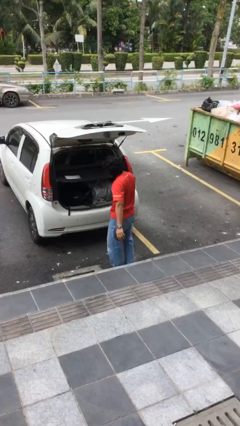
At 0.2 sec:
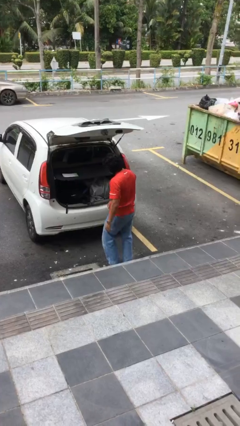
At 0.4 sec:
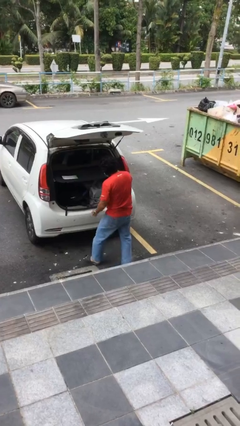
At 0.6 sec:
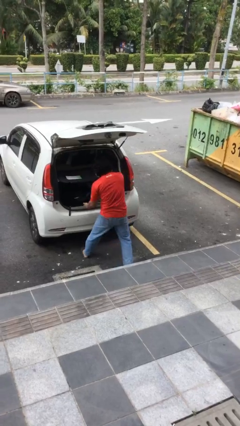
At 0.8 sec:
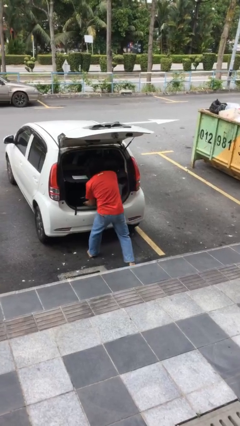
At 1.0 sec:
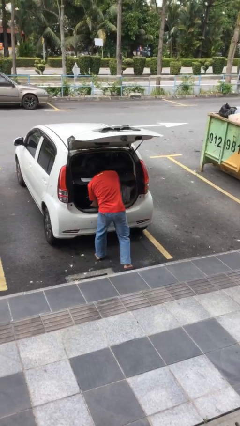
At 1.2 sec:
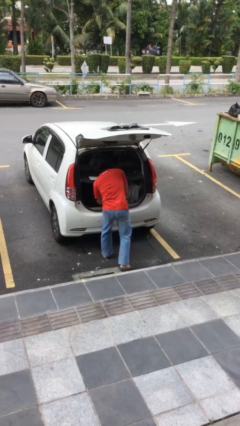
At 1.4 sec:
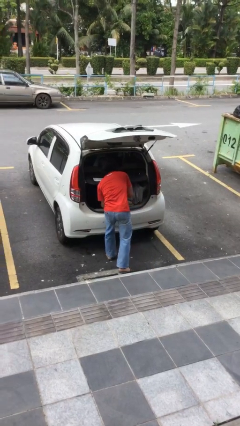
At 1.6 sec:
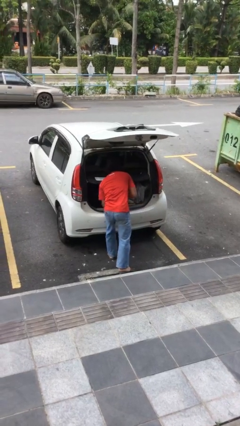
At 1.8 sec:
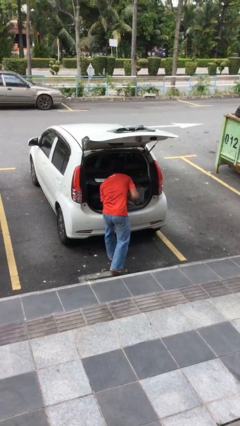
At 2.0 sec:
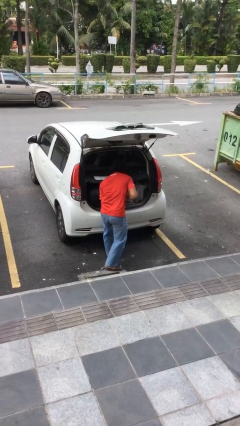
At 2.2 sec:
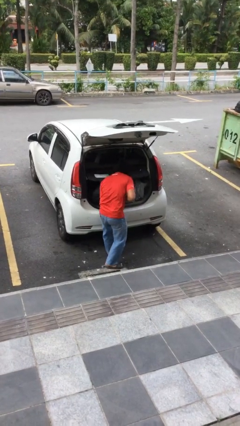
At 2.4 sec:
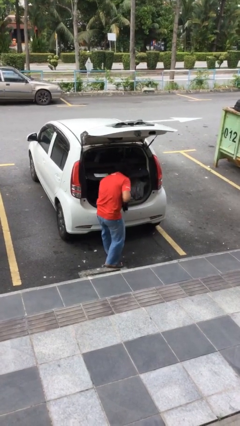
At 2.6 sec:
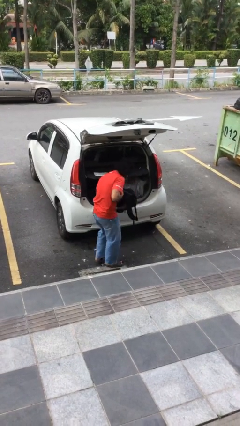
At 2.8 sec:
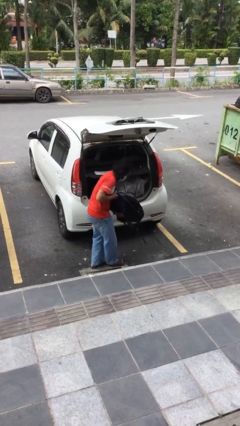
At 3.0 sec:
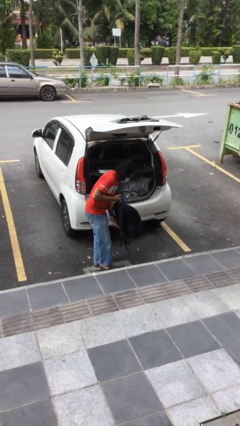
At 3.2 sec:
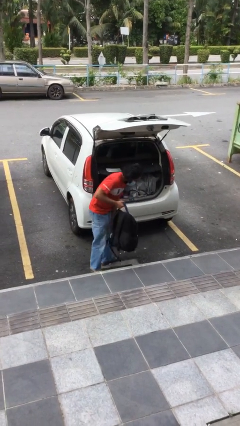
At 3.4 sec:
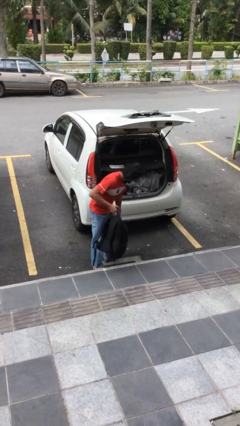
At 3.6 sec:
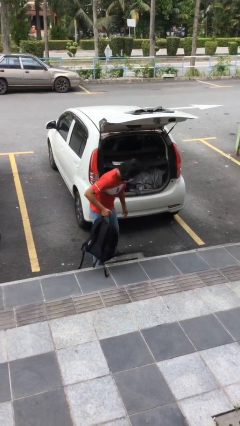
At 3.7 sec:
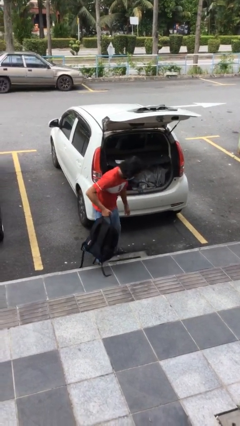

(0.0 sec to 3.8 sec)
person unloads car

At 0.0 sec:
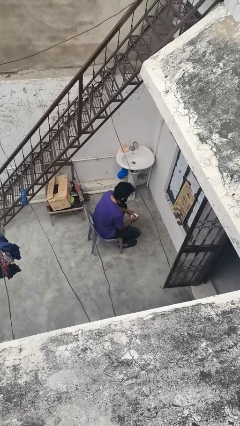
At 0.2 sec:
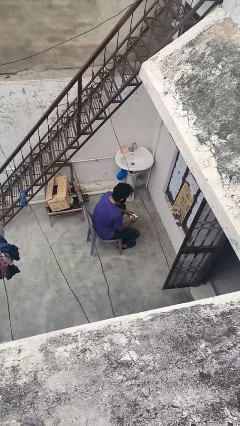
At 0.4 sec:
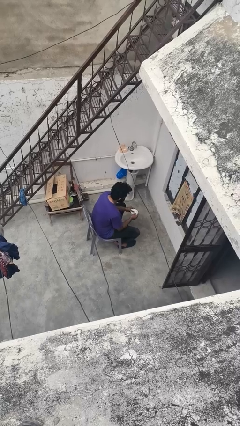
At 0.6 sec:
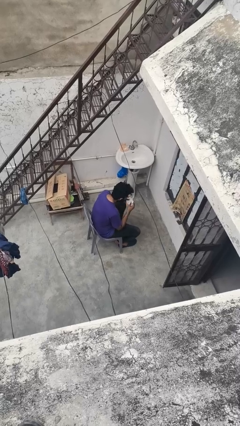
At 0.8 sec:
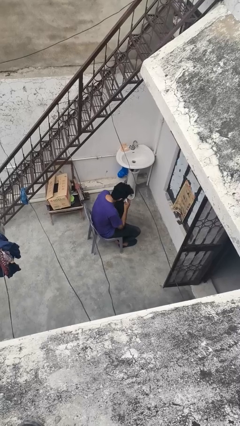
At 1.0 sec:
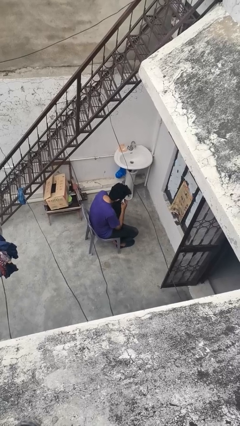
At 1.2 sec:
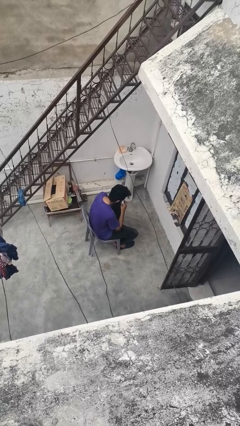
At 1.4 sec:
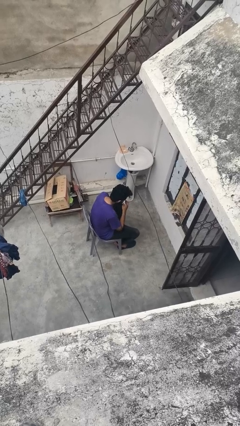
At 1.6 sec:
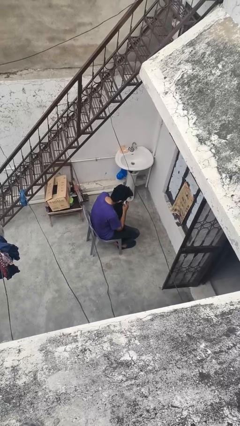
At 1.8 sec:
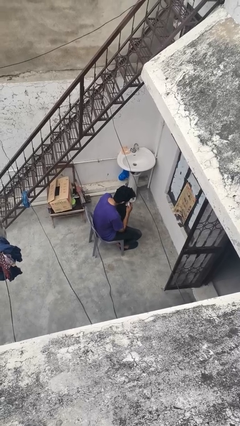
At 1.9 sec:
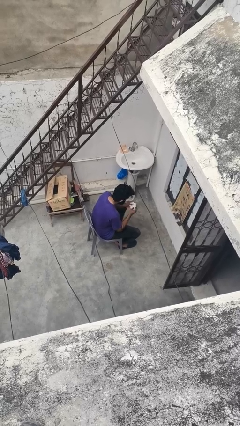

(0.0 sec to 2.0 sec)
person blows nose

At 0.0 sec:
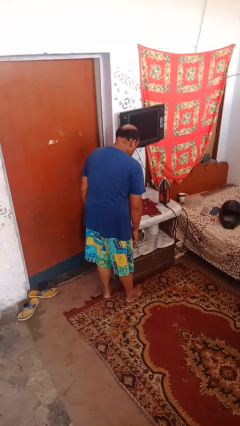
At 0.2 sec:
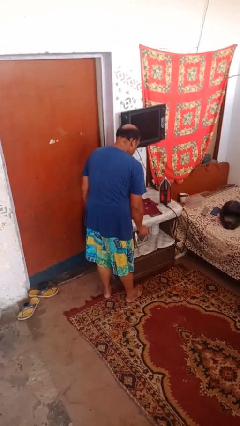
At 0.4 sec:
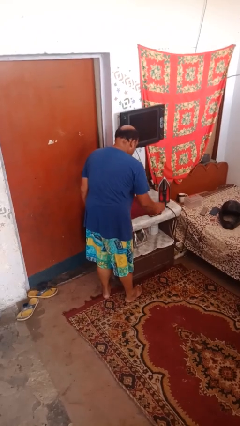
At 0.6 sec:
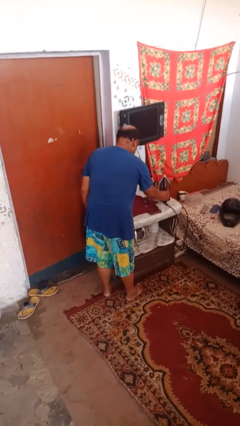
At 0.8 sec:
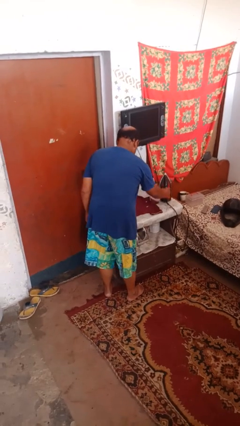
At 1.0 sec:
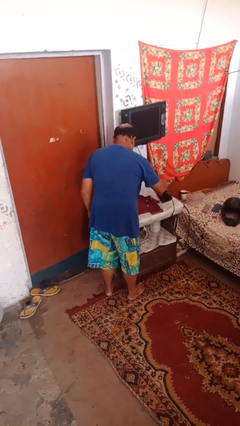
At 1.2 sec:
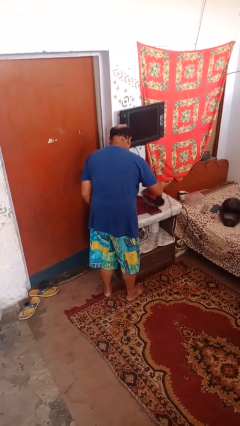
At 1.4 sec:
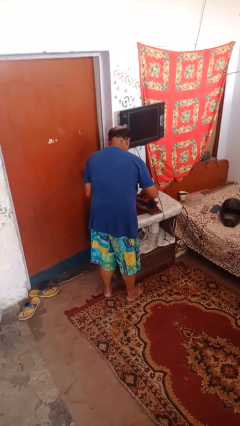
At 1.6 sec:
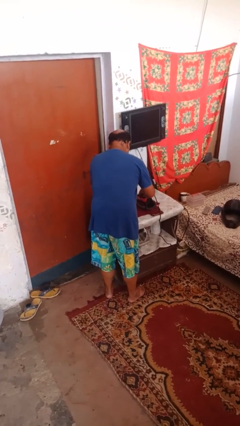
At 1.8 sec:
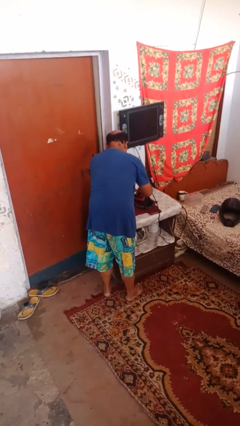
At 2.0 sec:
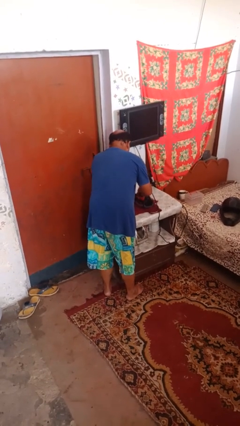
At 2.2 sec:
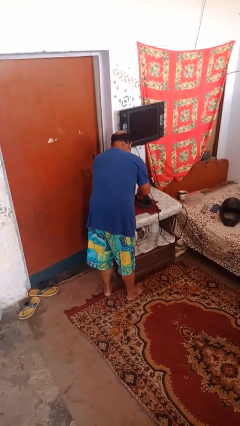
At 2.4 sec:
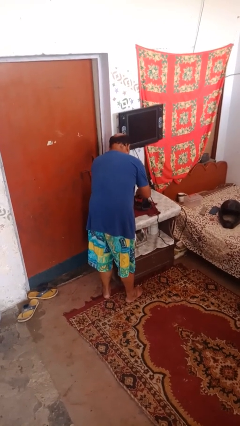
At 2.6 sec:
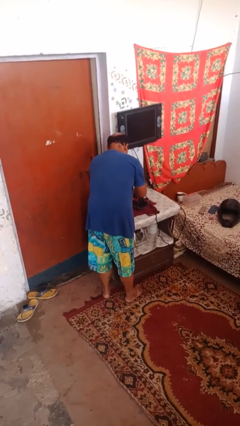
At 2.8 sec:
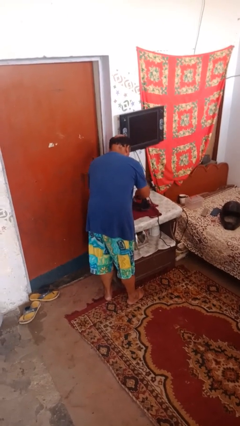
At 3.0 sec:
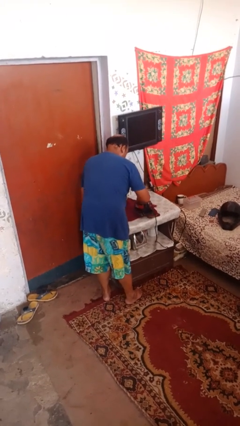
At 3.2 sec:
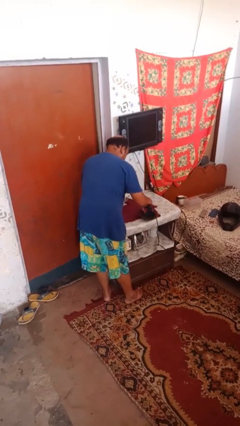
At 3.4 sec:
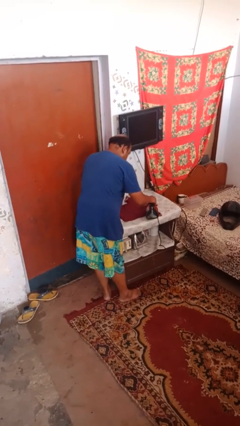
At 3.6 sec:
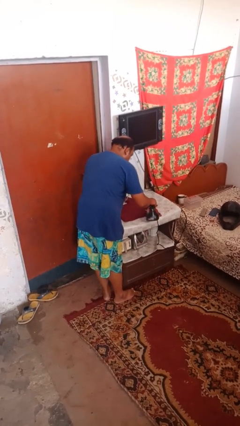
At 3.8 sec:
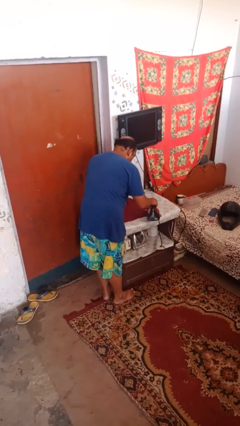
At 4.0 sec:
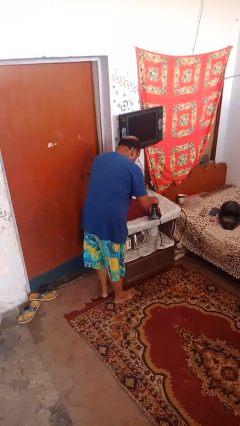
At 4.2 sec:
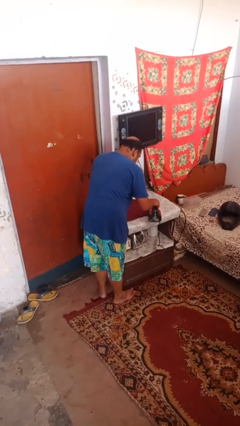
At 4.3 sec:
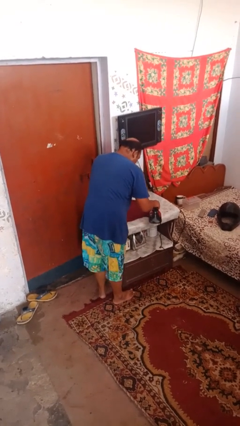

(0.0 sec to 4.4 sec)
person irons clothes

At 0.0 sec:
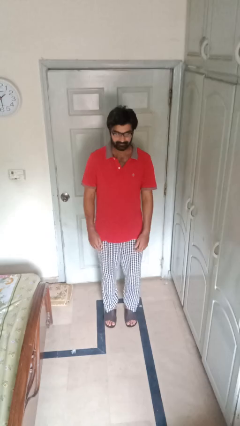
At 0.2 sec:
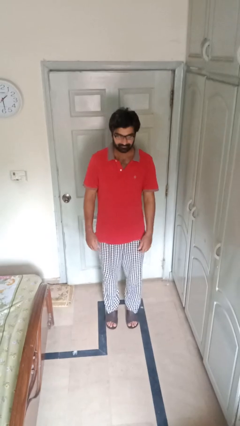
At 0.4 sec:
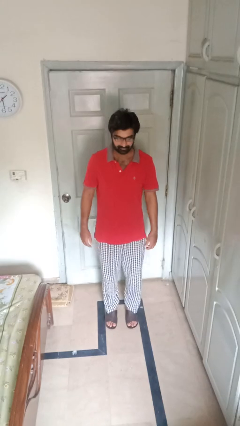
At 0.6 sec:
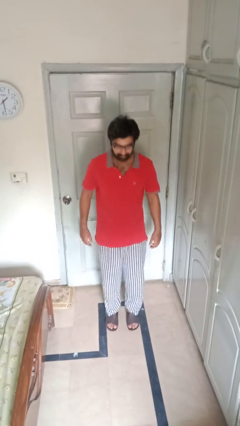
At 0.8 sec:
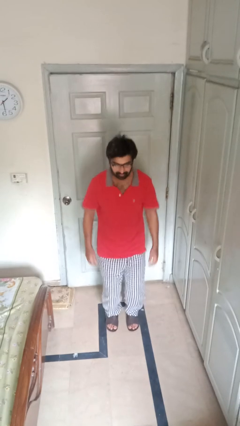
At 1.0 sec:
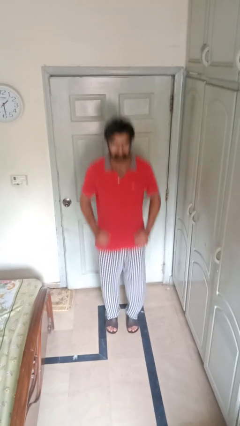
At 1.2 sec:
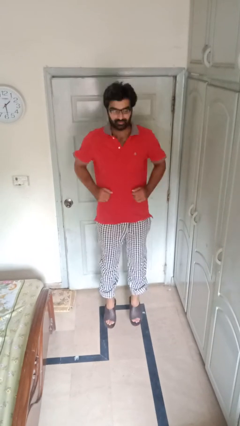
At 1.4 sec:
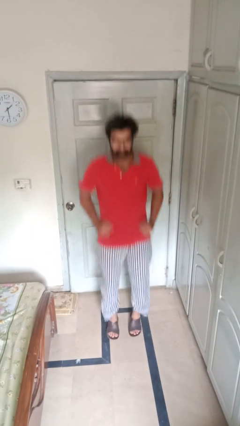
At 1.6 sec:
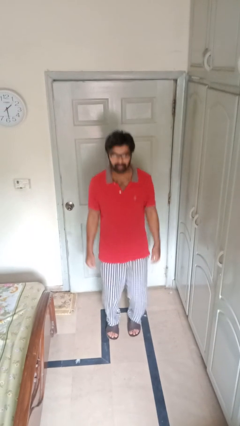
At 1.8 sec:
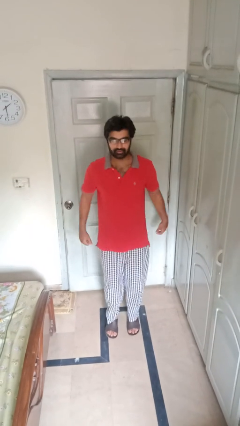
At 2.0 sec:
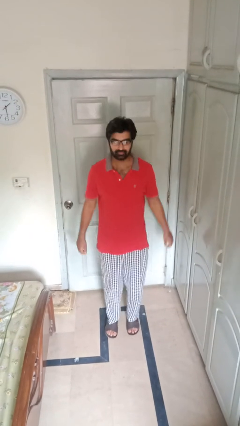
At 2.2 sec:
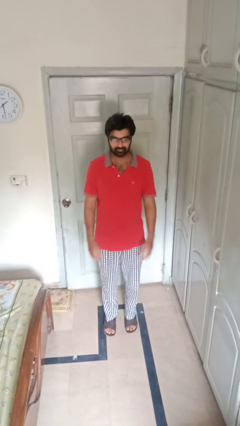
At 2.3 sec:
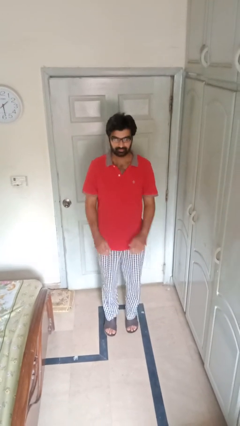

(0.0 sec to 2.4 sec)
person jumps

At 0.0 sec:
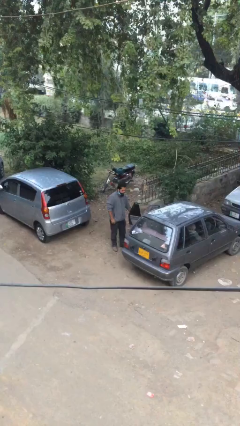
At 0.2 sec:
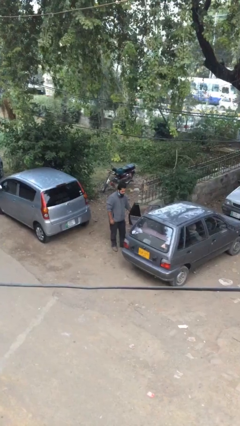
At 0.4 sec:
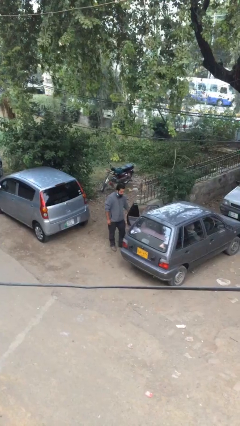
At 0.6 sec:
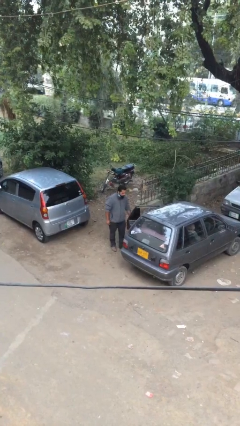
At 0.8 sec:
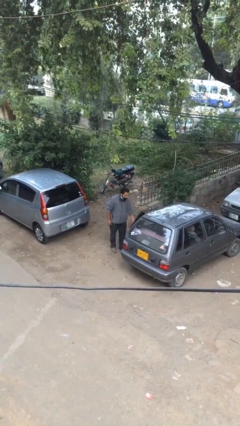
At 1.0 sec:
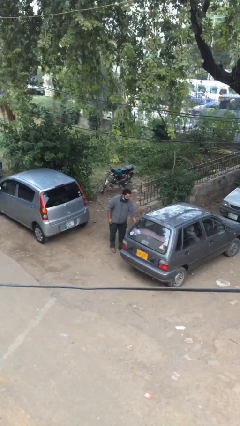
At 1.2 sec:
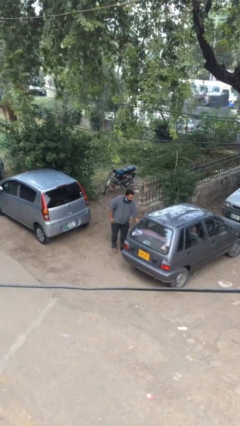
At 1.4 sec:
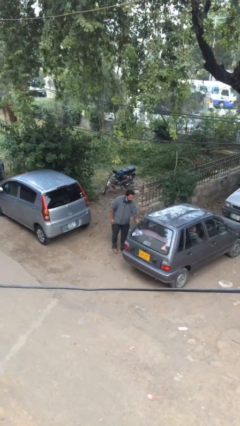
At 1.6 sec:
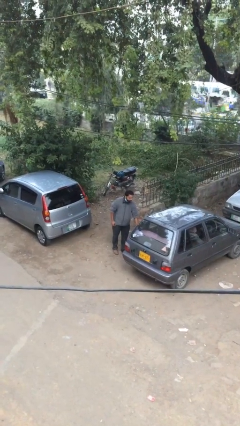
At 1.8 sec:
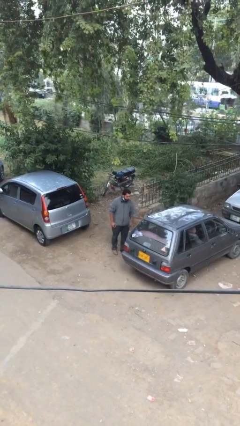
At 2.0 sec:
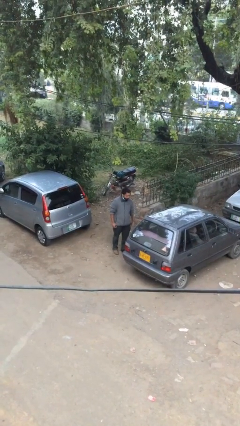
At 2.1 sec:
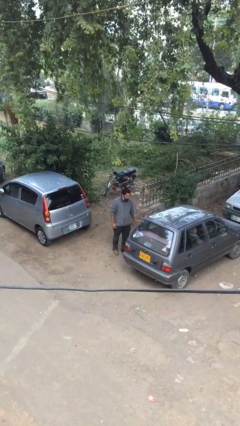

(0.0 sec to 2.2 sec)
person closes car door

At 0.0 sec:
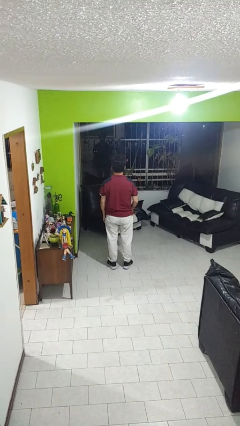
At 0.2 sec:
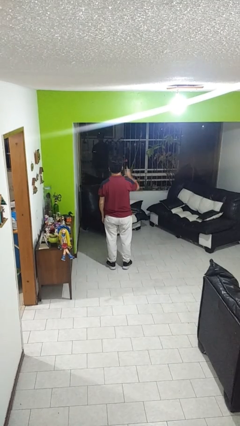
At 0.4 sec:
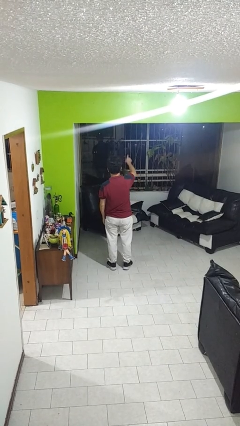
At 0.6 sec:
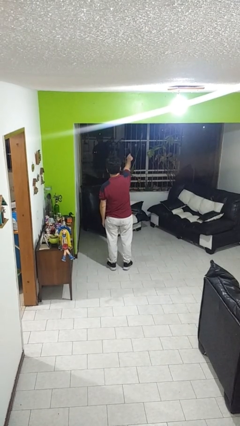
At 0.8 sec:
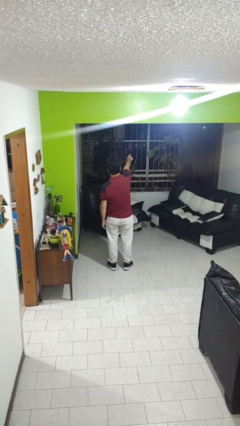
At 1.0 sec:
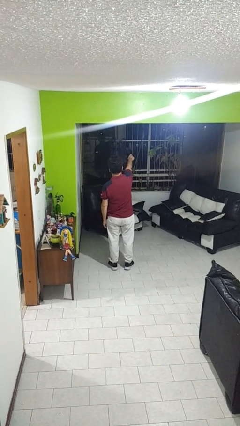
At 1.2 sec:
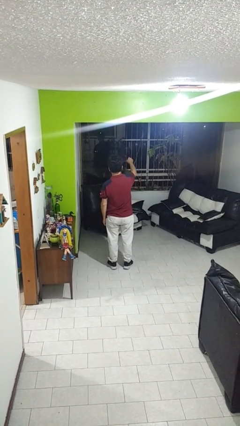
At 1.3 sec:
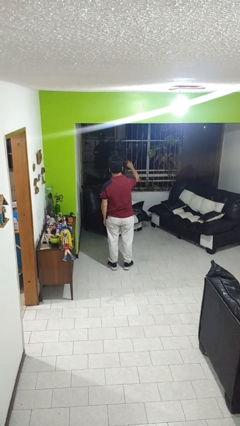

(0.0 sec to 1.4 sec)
person points at person

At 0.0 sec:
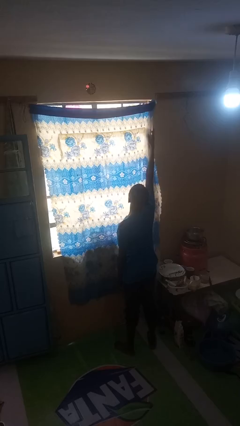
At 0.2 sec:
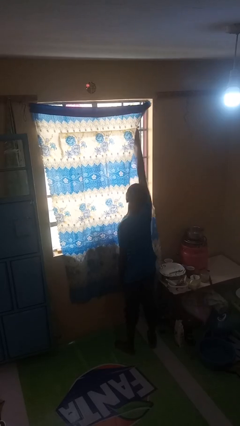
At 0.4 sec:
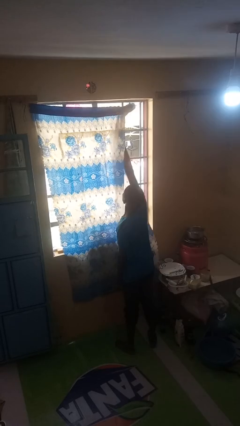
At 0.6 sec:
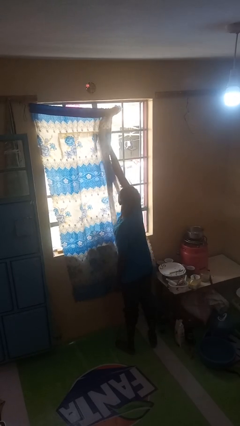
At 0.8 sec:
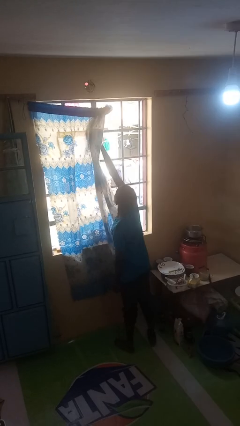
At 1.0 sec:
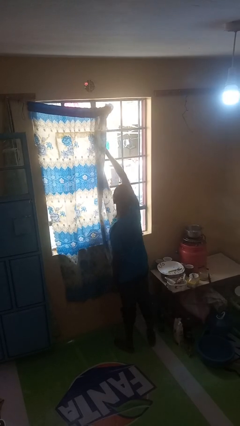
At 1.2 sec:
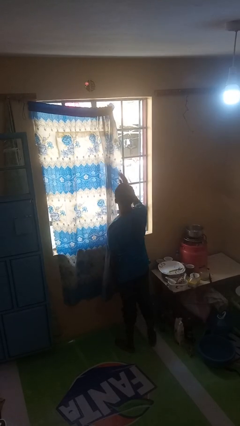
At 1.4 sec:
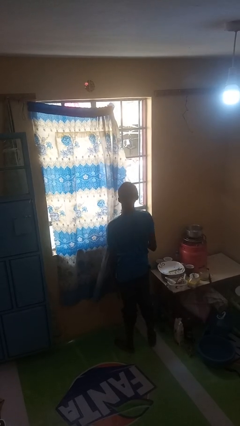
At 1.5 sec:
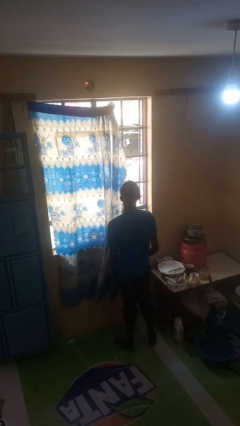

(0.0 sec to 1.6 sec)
person opens curtains
